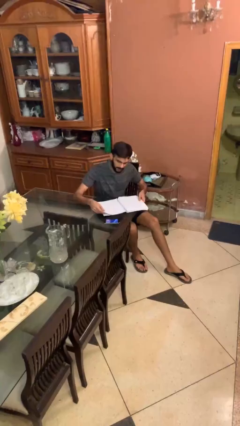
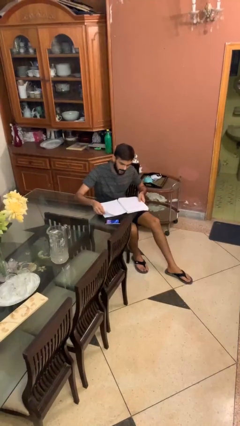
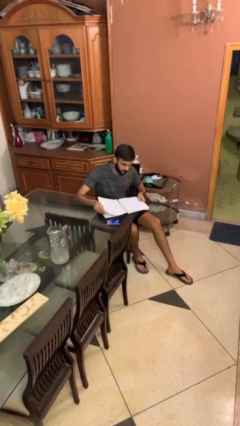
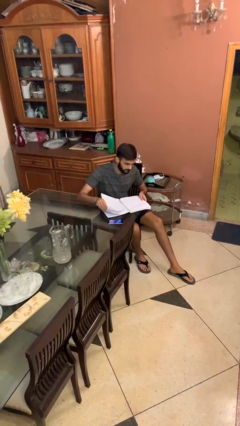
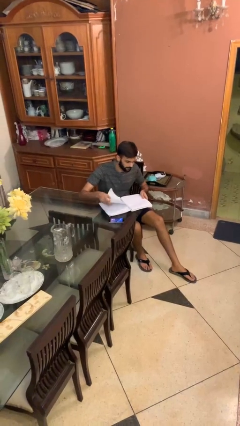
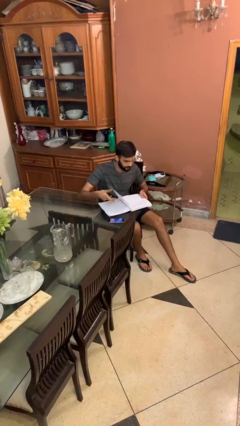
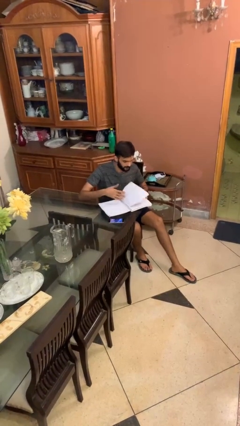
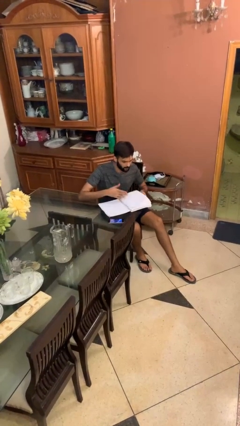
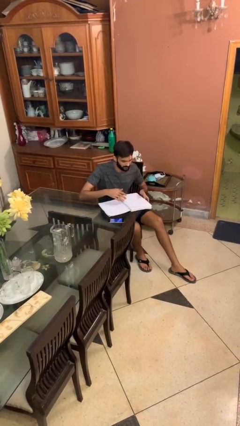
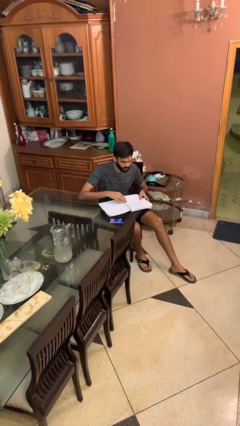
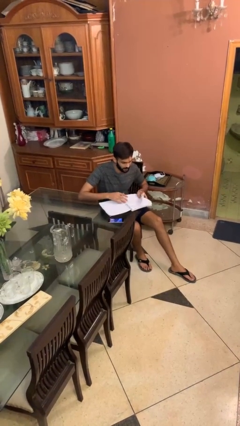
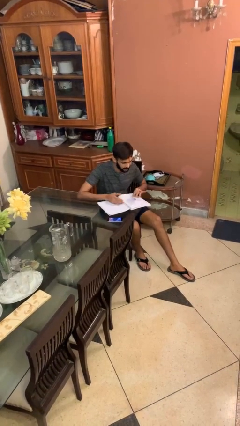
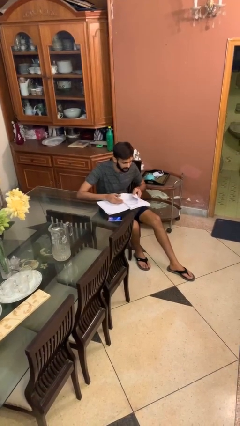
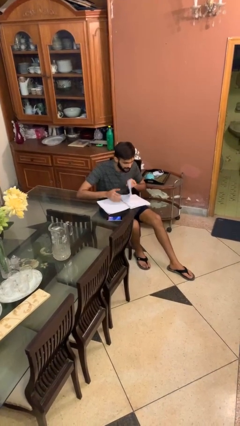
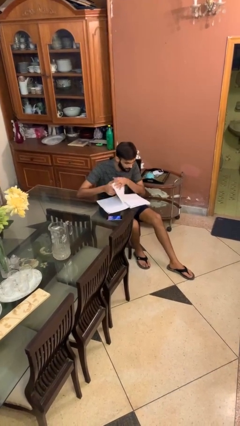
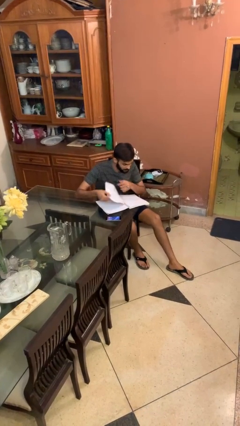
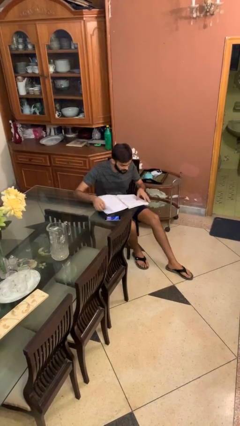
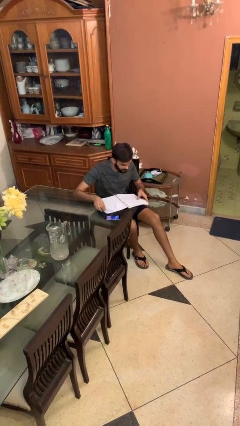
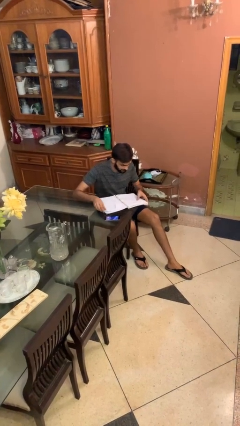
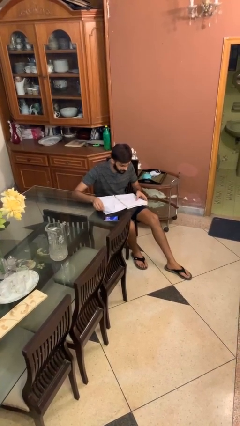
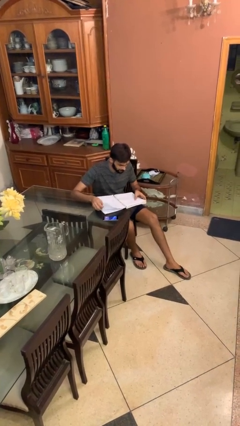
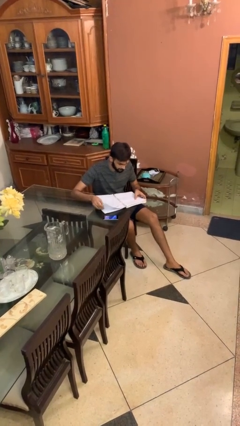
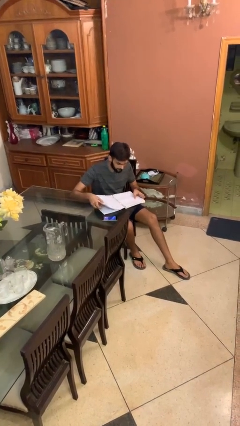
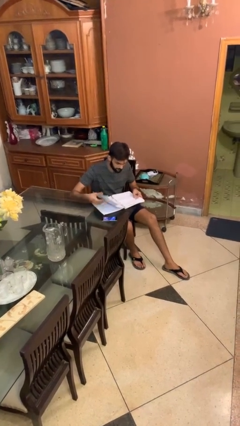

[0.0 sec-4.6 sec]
person reads document

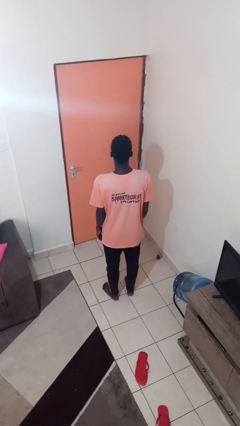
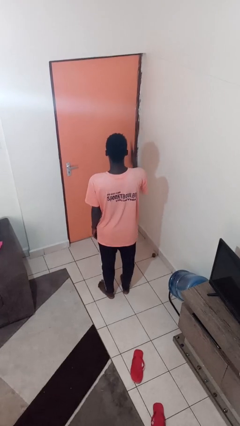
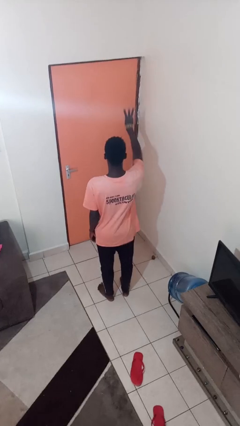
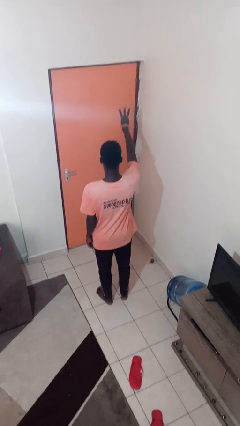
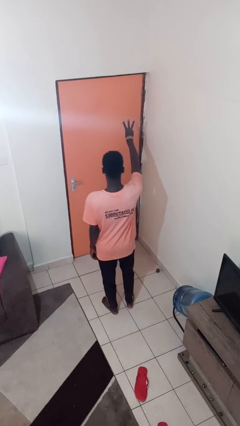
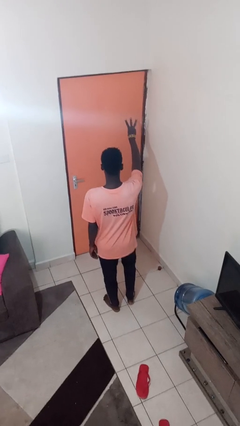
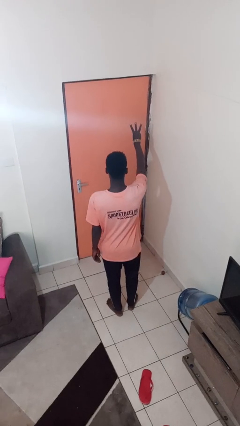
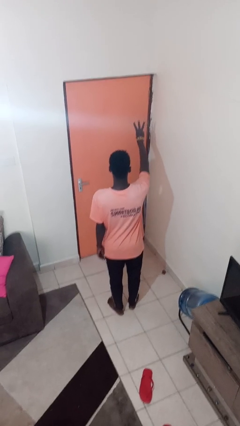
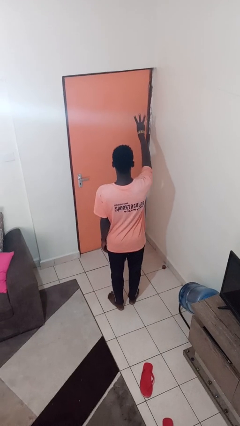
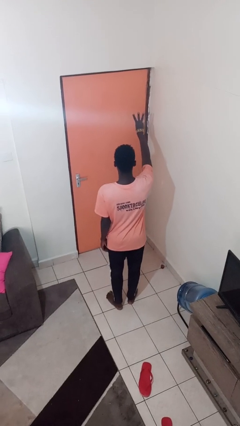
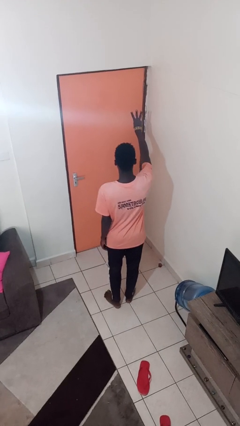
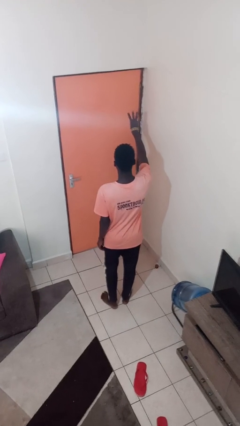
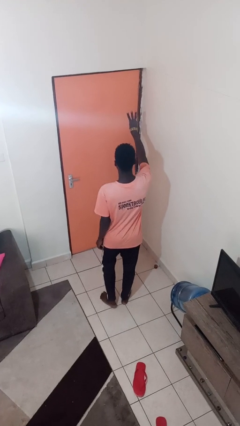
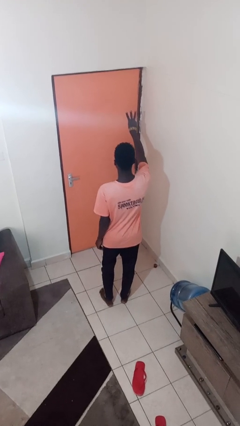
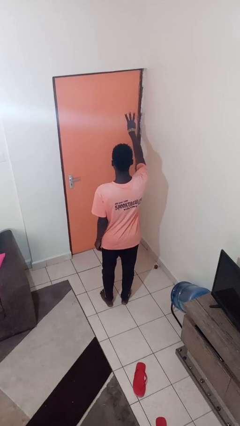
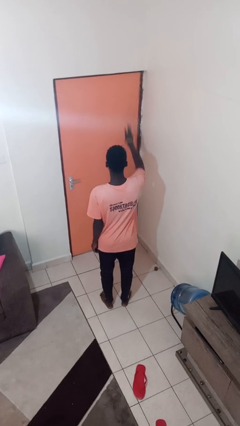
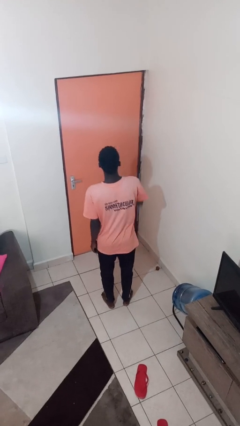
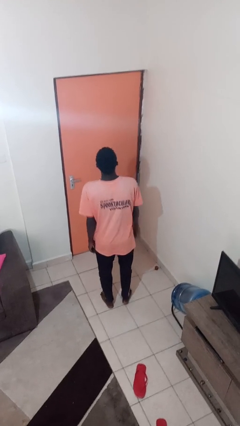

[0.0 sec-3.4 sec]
person gestures number three

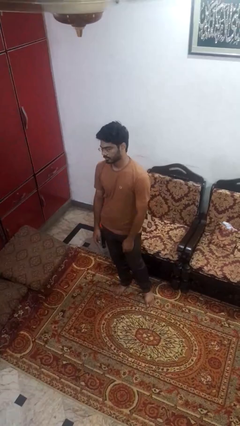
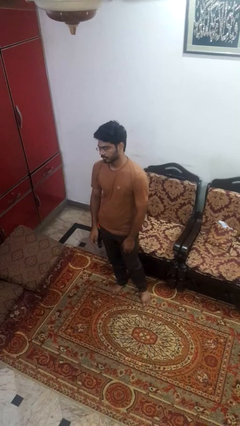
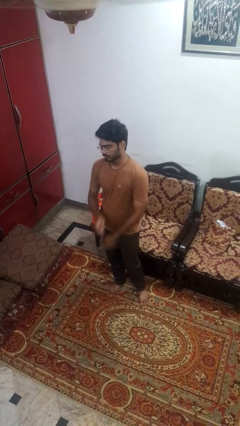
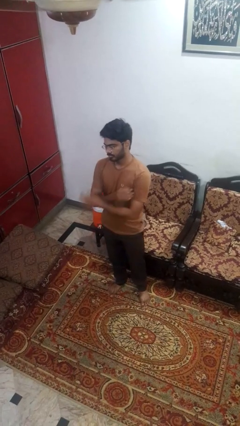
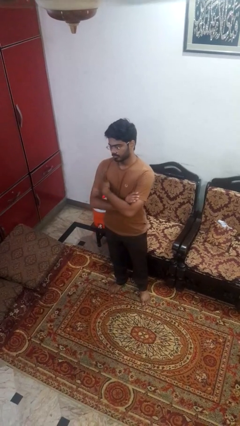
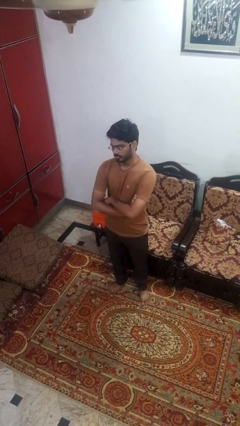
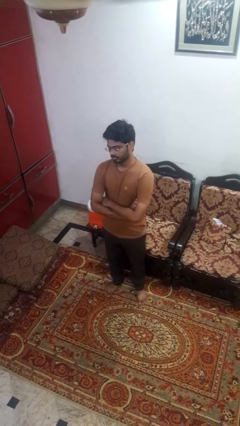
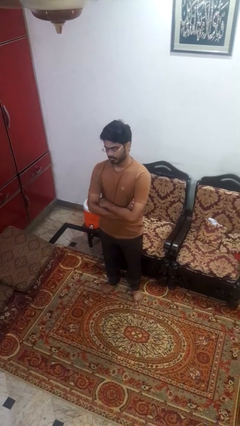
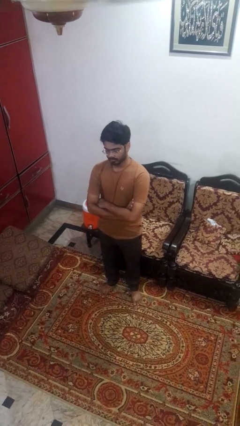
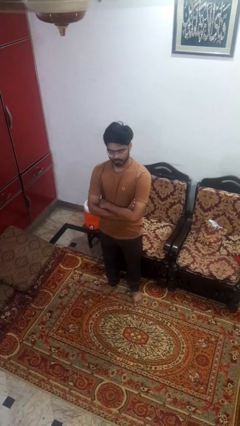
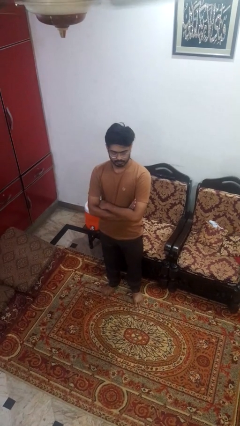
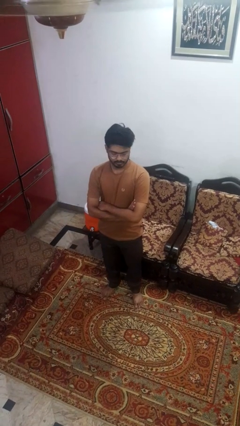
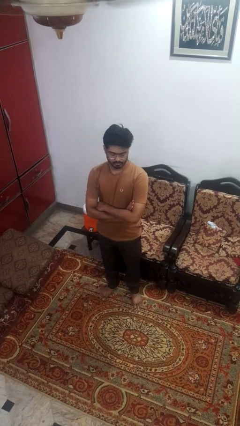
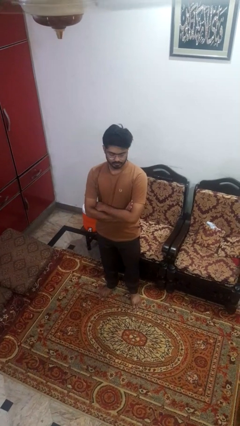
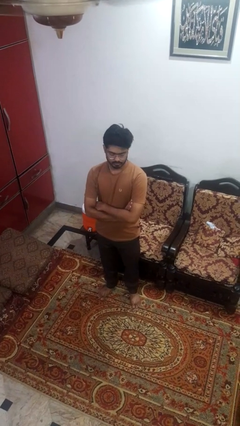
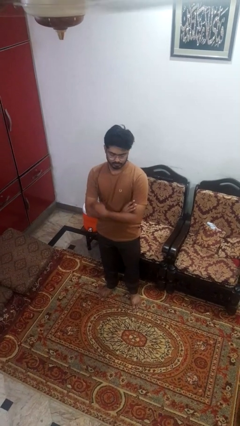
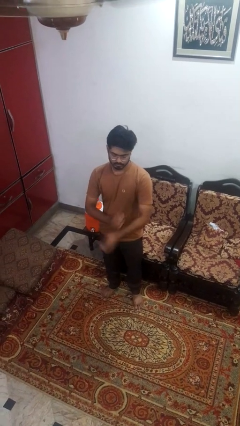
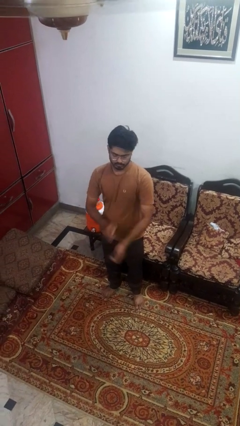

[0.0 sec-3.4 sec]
person crosses arms

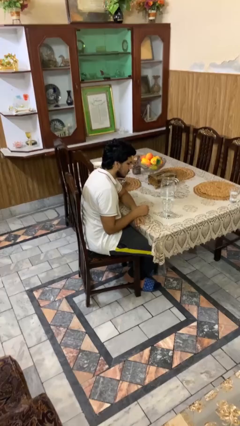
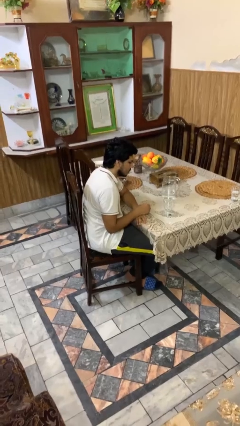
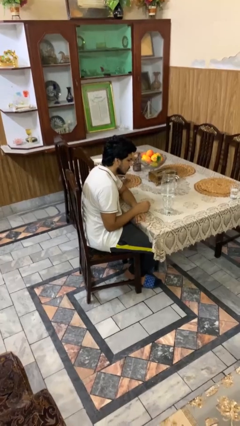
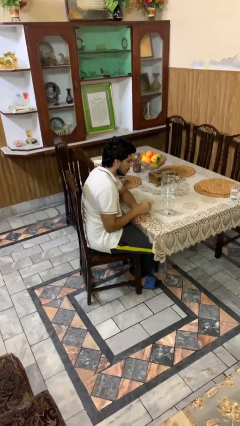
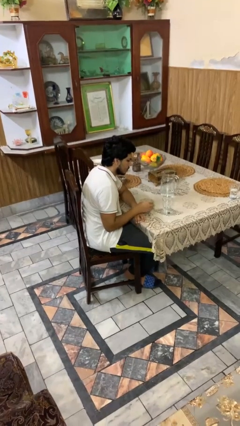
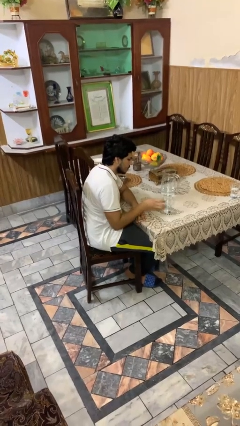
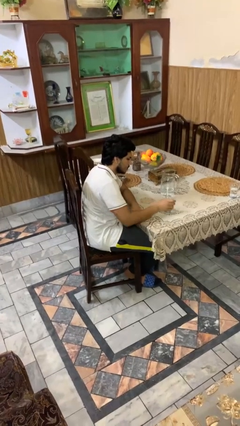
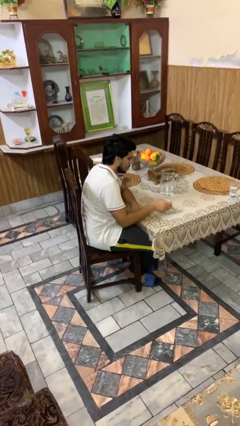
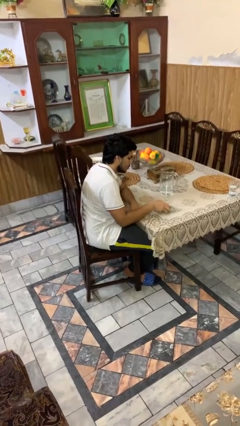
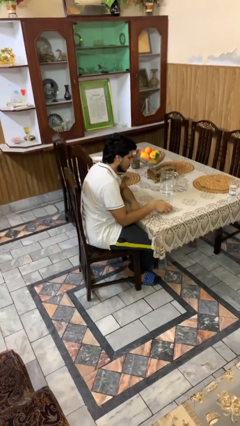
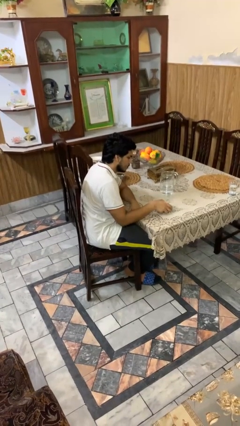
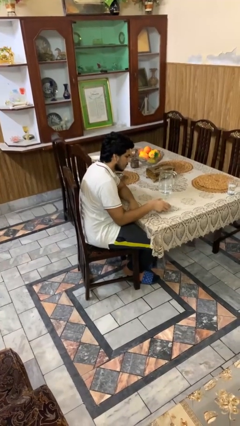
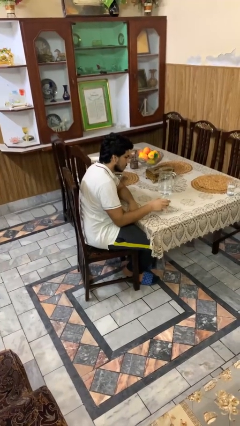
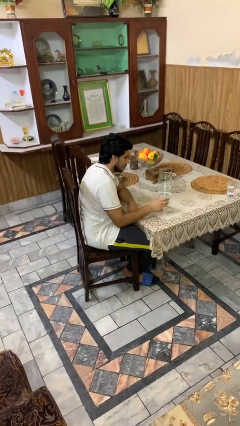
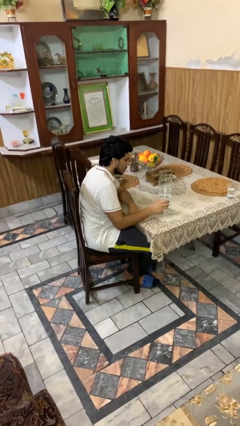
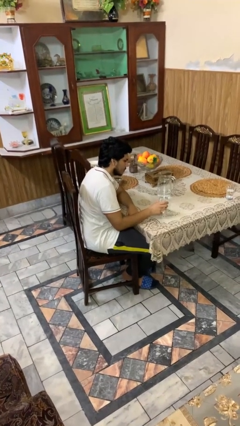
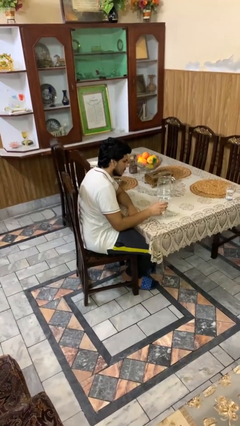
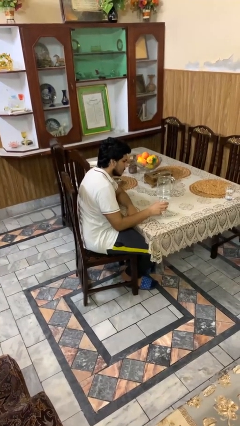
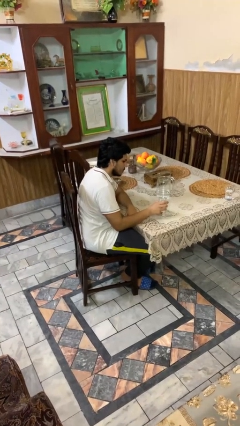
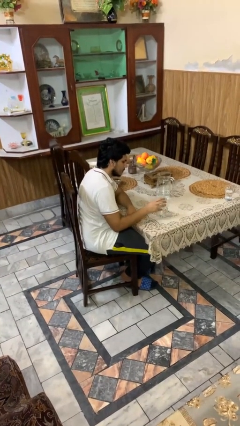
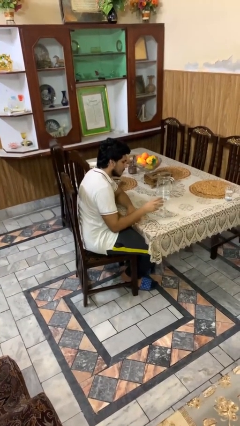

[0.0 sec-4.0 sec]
person spills on table

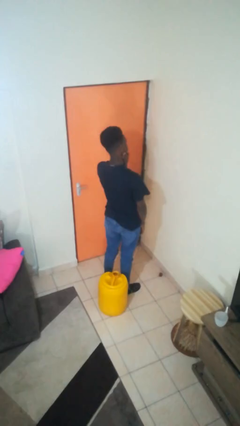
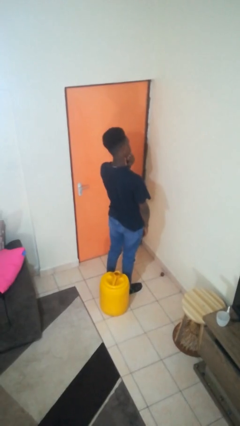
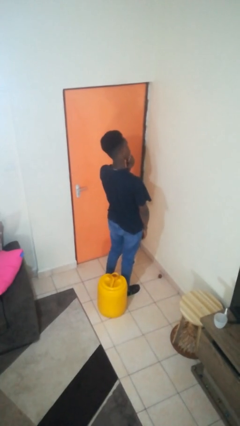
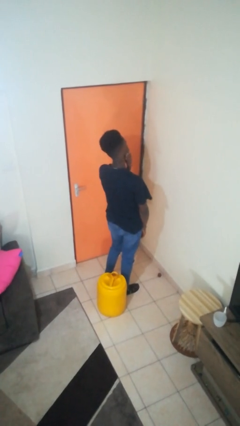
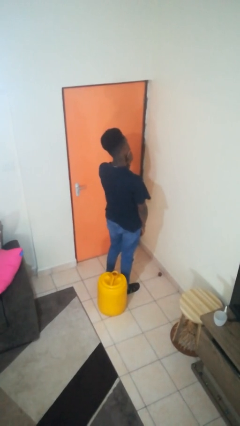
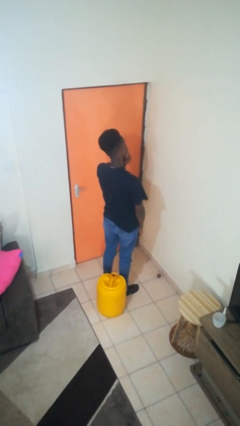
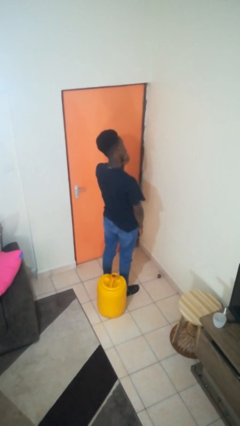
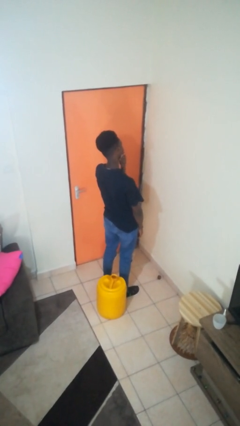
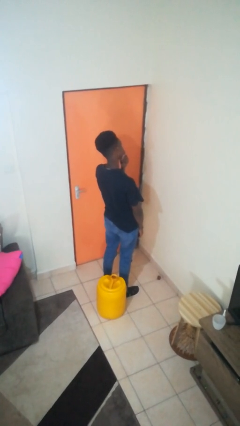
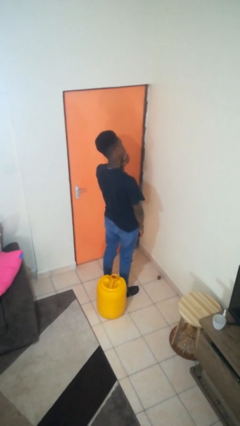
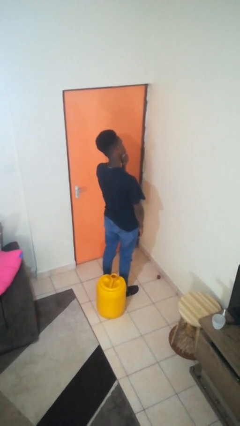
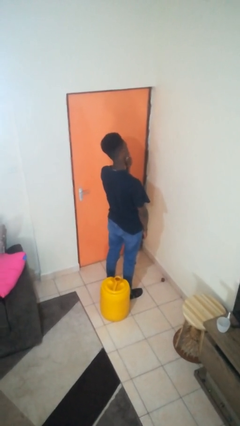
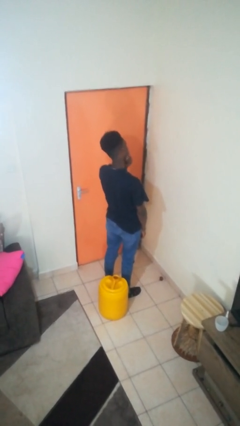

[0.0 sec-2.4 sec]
person strokes chin
